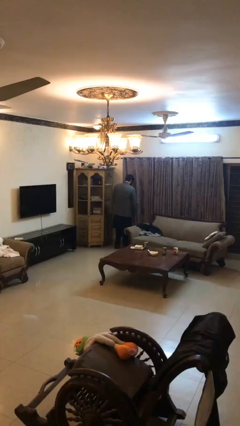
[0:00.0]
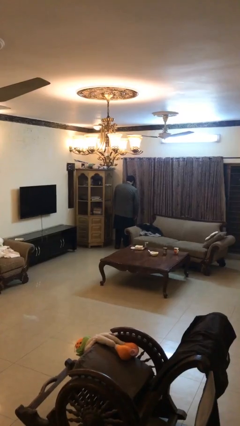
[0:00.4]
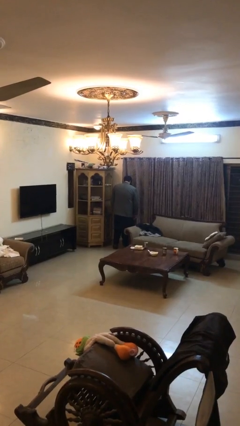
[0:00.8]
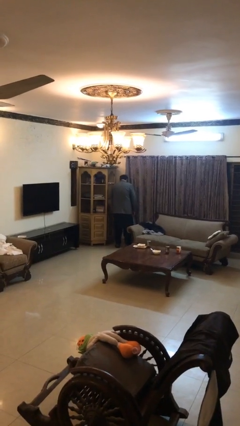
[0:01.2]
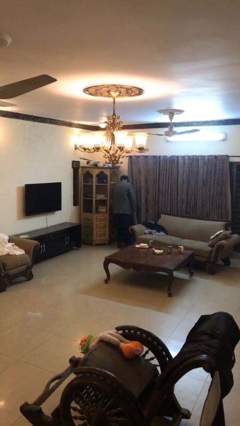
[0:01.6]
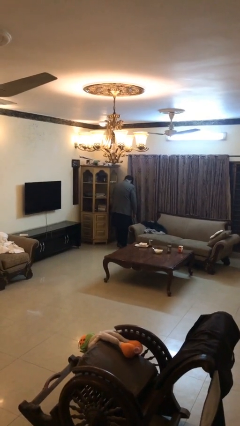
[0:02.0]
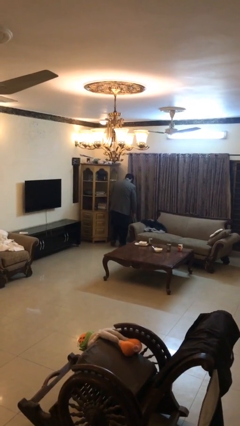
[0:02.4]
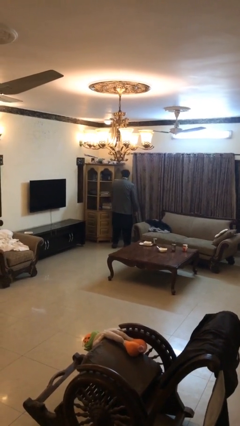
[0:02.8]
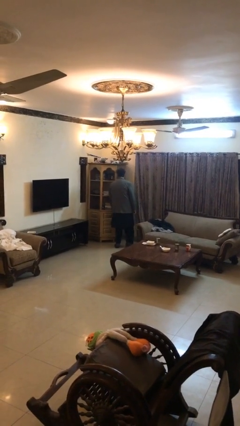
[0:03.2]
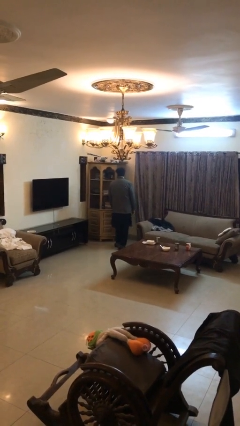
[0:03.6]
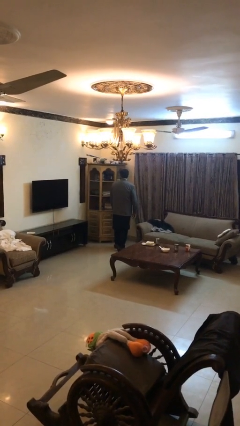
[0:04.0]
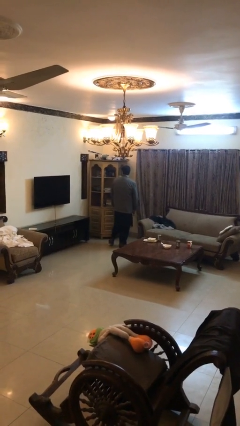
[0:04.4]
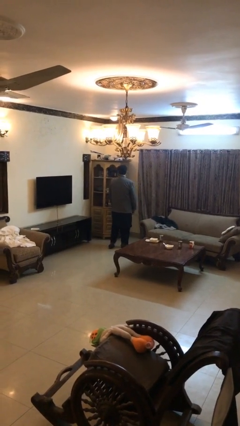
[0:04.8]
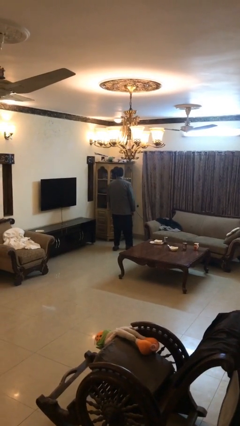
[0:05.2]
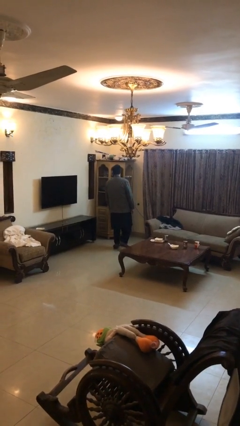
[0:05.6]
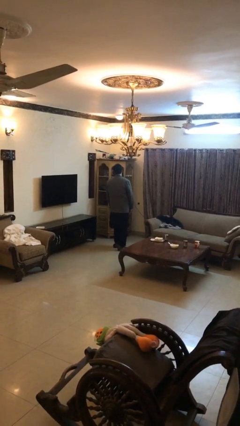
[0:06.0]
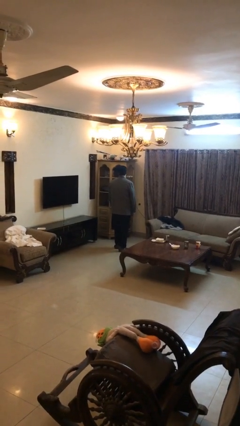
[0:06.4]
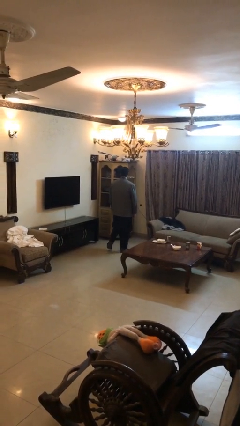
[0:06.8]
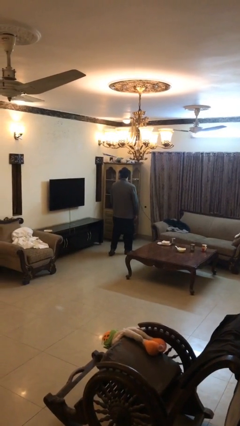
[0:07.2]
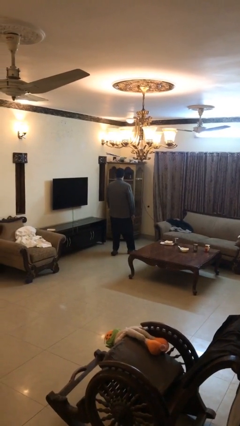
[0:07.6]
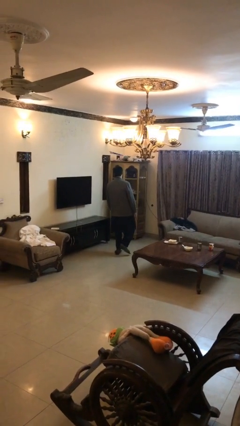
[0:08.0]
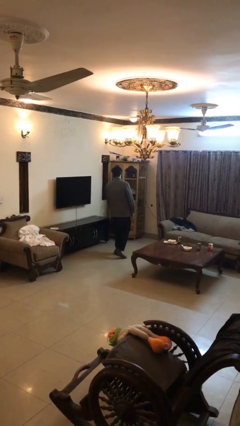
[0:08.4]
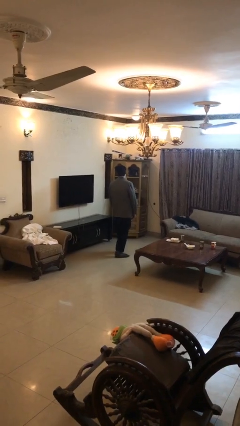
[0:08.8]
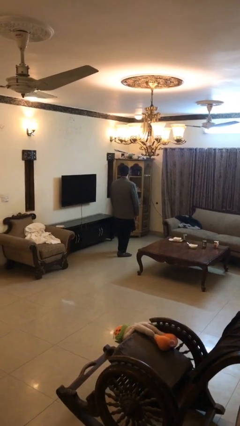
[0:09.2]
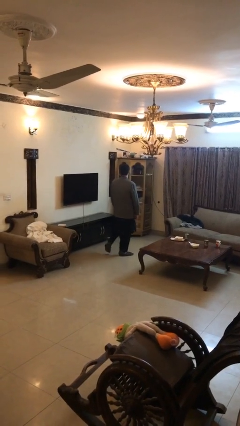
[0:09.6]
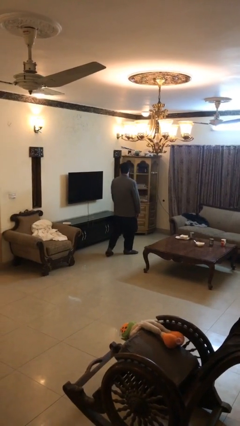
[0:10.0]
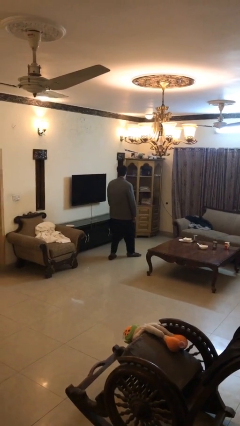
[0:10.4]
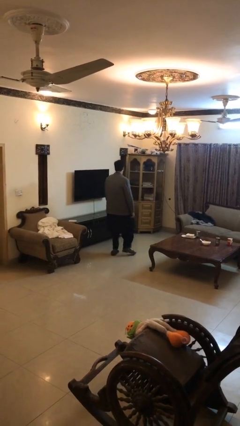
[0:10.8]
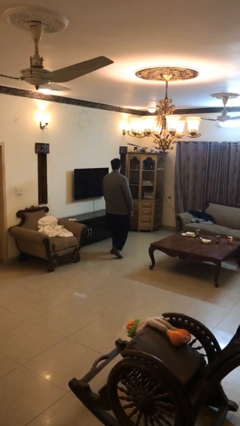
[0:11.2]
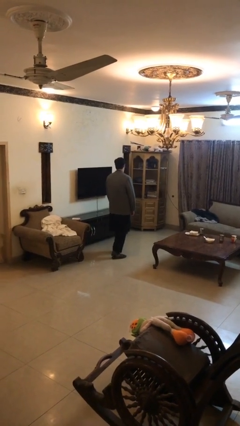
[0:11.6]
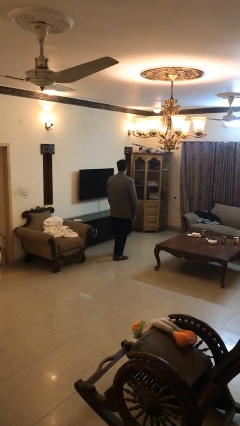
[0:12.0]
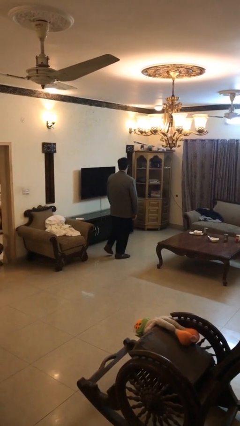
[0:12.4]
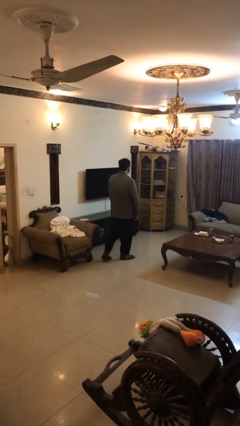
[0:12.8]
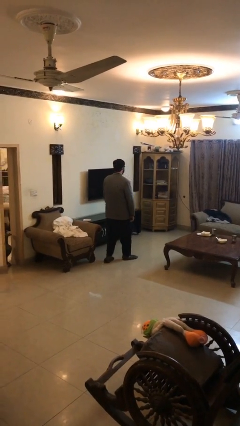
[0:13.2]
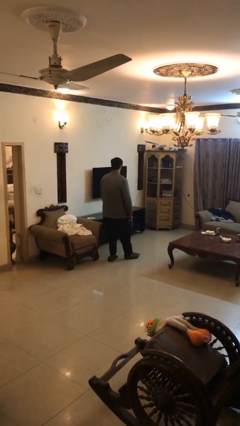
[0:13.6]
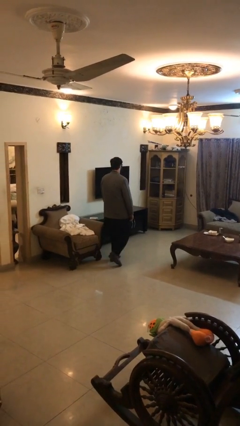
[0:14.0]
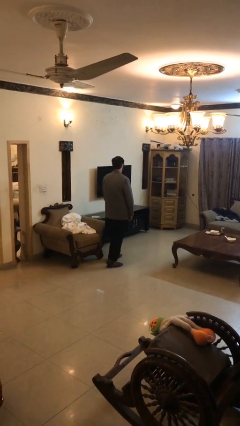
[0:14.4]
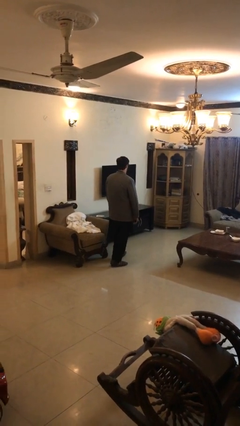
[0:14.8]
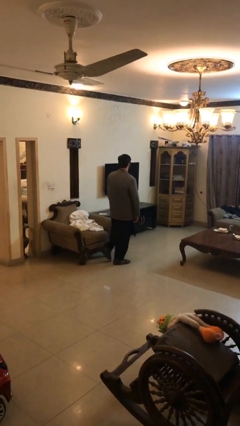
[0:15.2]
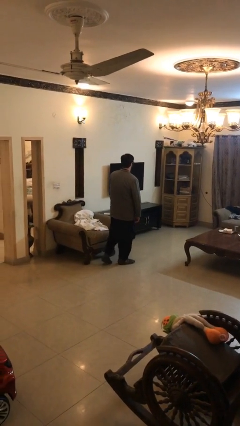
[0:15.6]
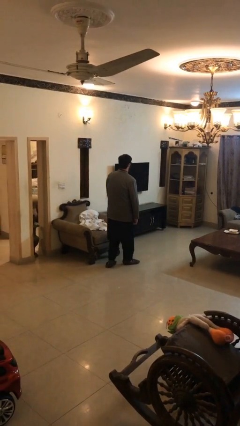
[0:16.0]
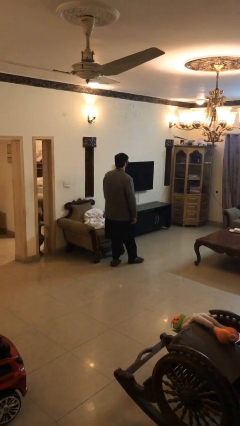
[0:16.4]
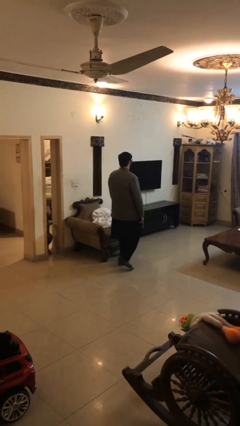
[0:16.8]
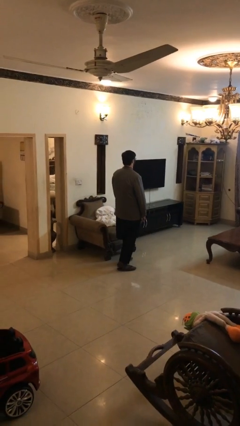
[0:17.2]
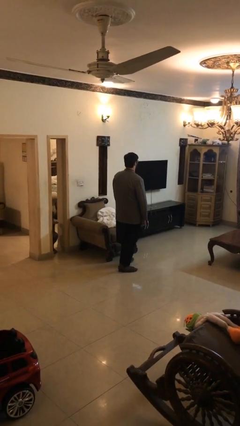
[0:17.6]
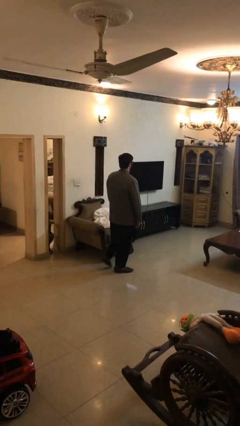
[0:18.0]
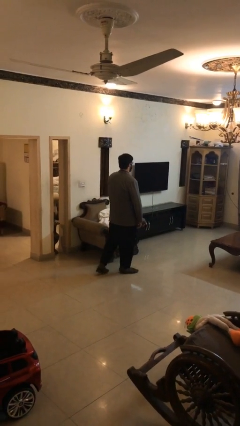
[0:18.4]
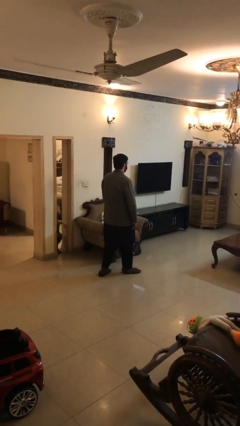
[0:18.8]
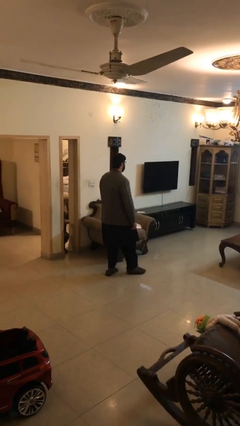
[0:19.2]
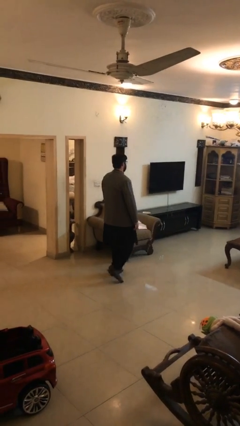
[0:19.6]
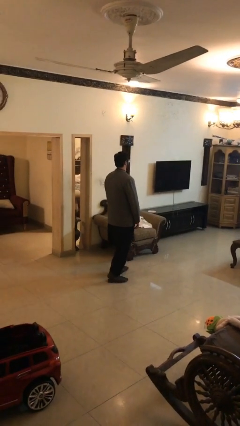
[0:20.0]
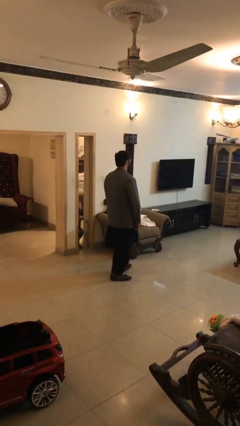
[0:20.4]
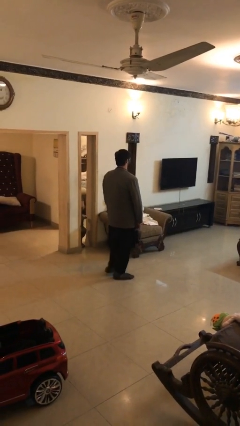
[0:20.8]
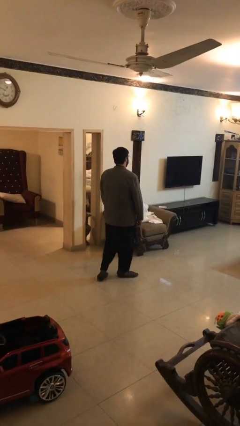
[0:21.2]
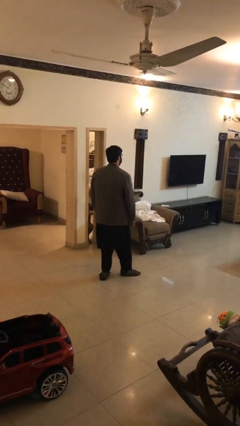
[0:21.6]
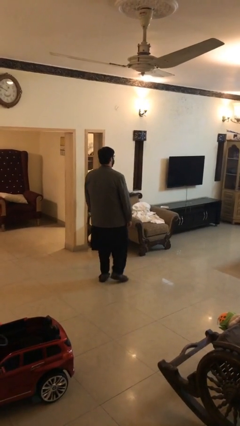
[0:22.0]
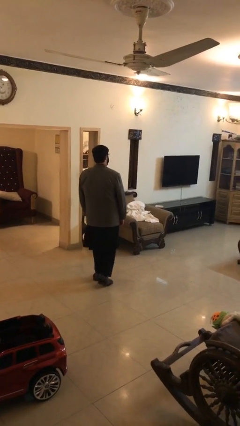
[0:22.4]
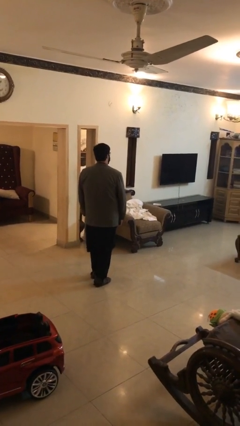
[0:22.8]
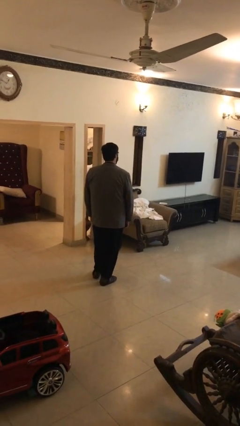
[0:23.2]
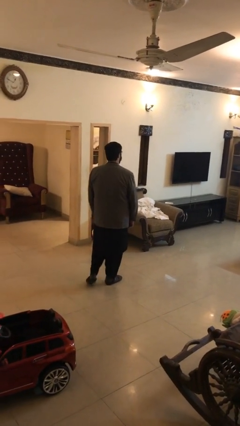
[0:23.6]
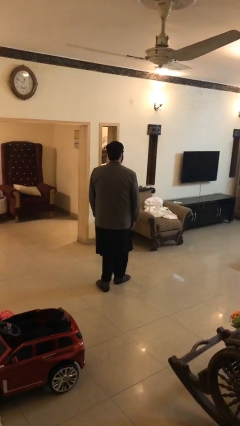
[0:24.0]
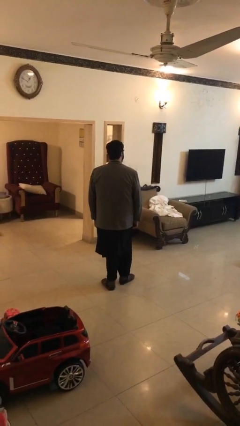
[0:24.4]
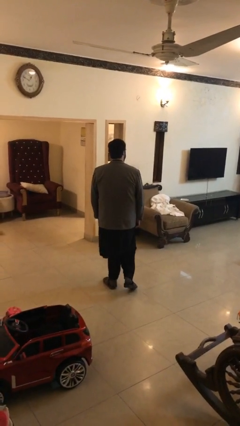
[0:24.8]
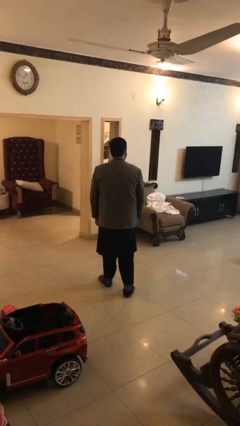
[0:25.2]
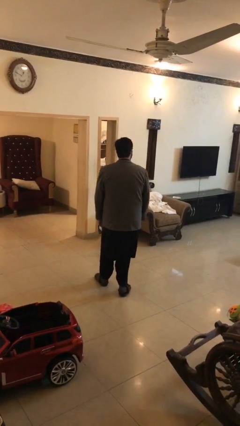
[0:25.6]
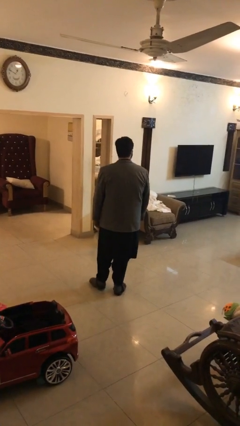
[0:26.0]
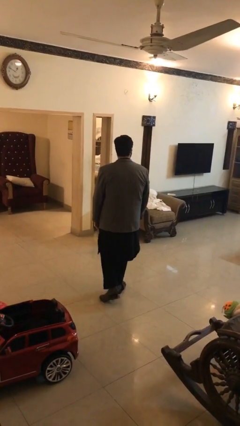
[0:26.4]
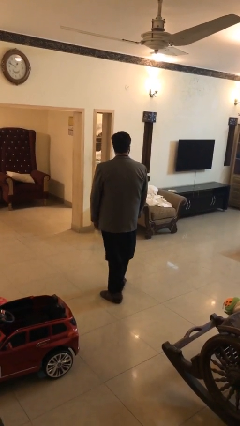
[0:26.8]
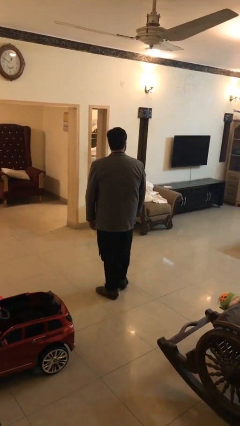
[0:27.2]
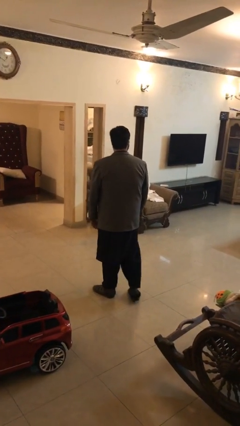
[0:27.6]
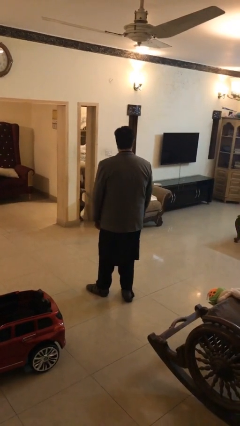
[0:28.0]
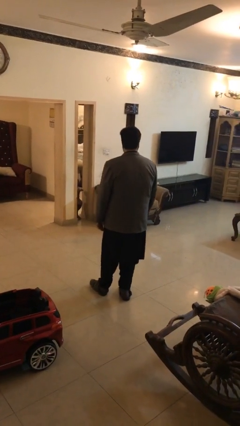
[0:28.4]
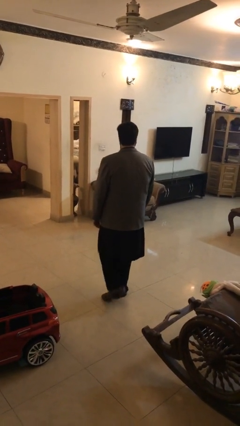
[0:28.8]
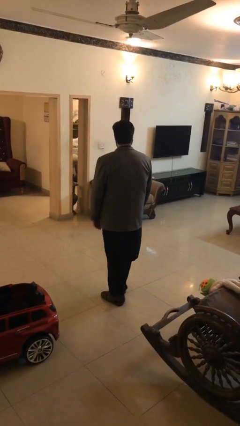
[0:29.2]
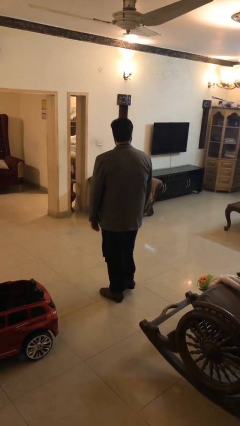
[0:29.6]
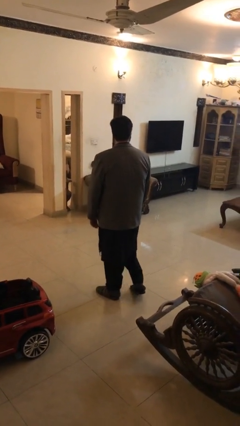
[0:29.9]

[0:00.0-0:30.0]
person walks

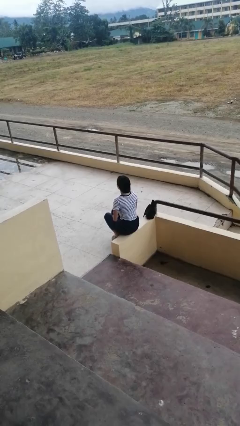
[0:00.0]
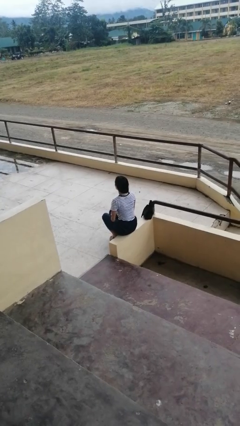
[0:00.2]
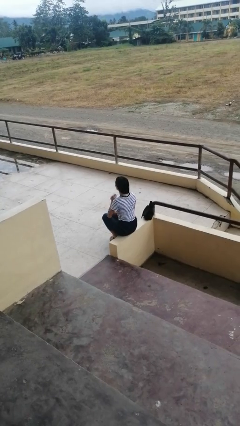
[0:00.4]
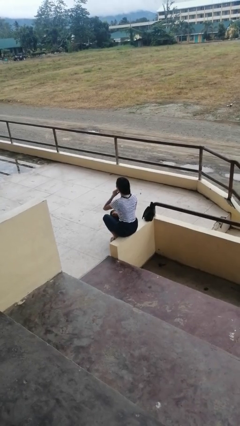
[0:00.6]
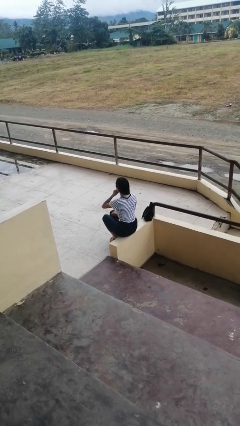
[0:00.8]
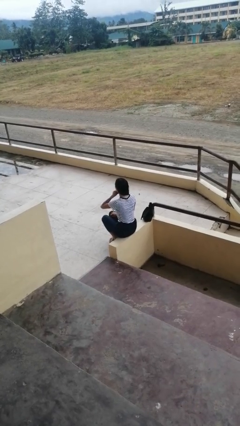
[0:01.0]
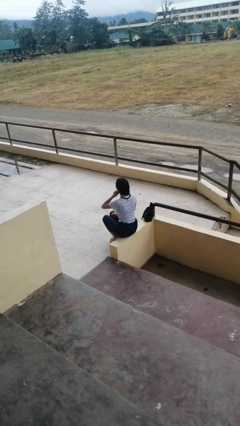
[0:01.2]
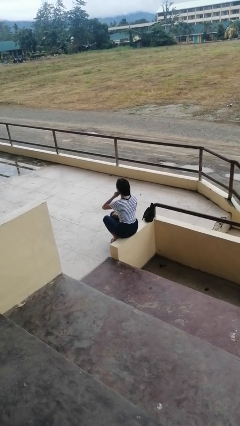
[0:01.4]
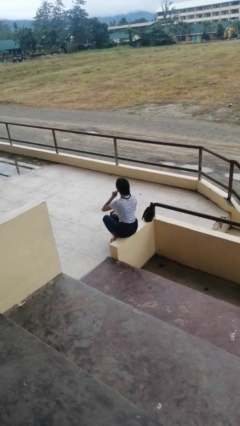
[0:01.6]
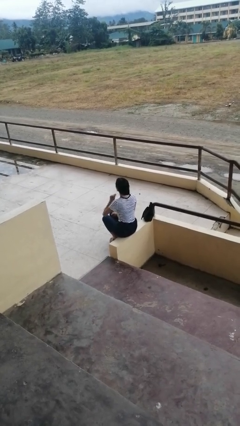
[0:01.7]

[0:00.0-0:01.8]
person strokes chin

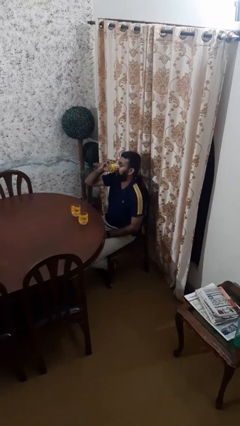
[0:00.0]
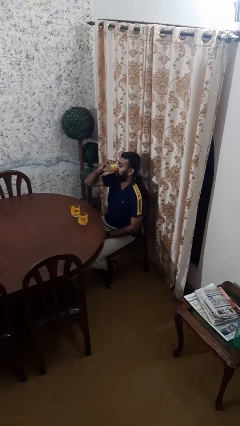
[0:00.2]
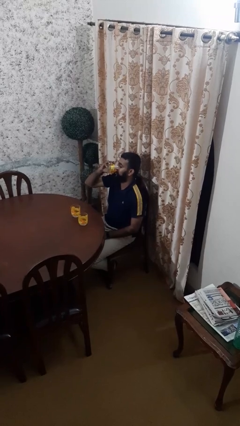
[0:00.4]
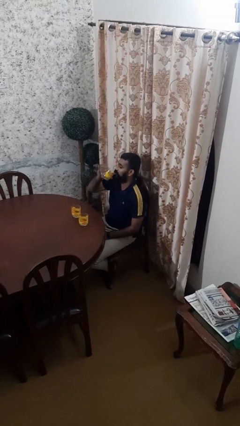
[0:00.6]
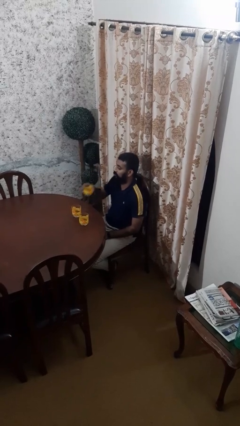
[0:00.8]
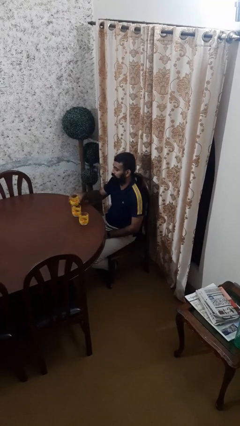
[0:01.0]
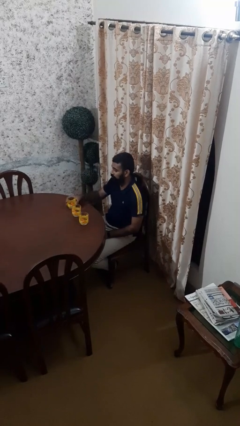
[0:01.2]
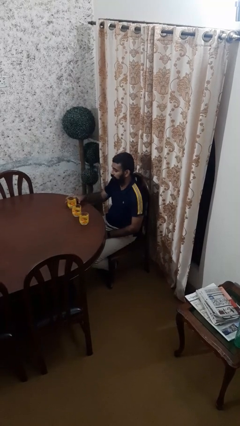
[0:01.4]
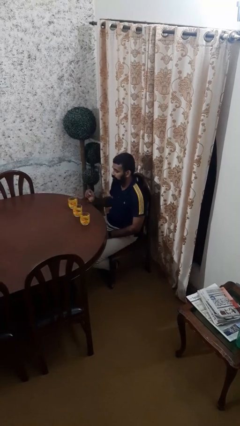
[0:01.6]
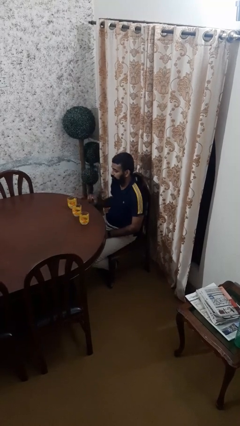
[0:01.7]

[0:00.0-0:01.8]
person puts down object on table
